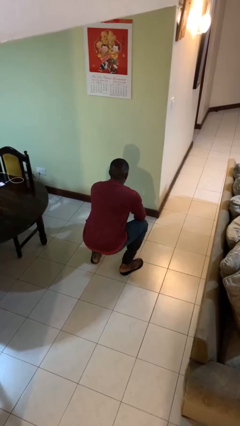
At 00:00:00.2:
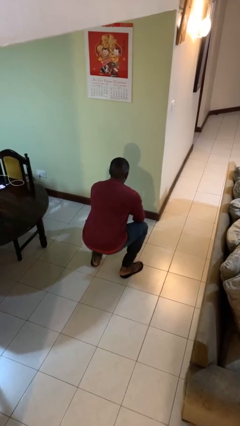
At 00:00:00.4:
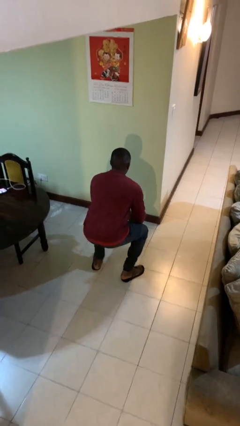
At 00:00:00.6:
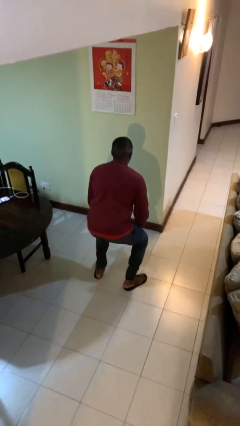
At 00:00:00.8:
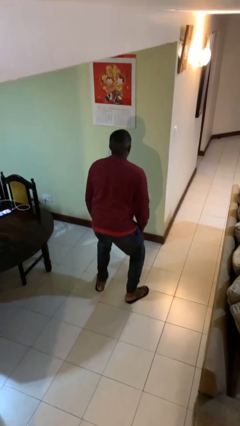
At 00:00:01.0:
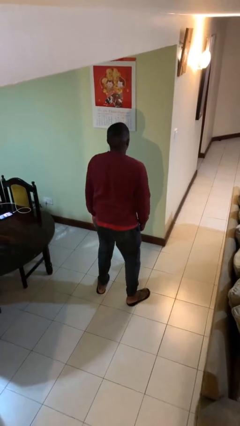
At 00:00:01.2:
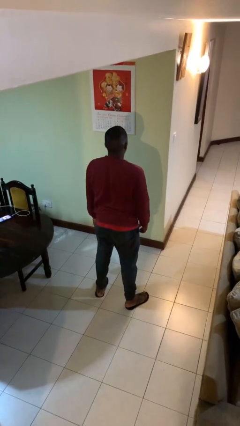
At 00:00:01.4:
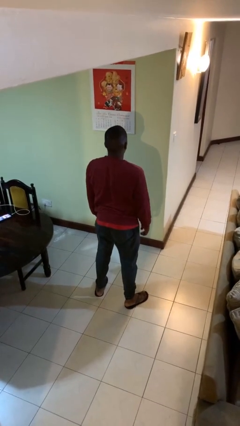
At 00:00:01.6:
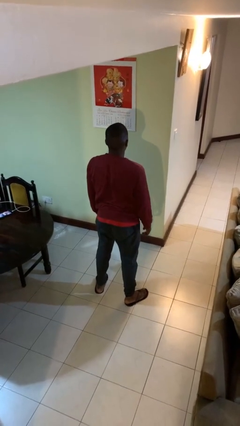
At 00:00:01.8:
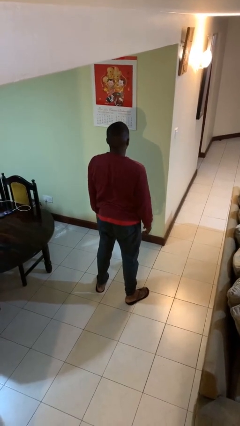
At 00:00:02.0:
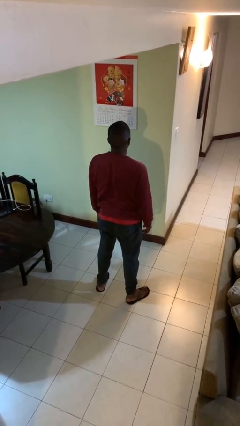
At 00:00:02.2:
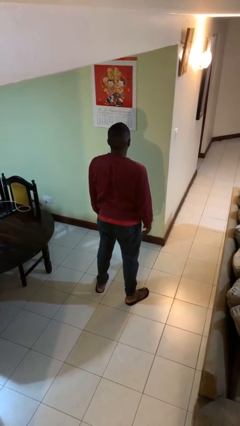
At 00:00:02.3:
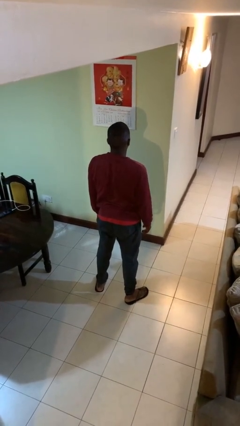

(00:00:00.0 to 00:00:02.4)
person stands up

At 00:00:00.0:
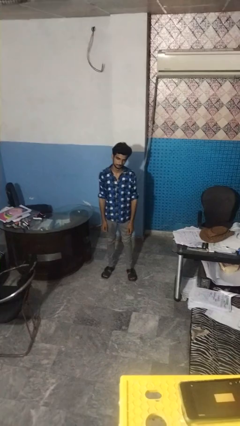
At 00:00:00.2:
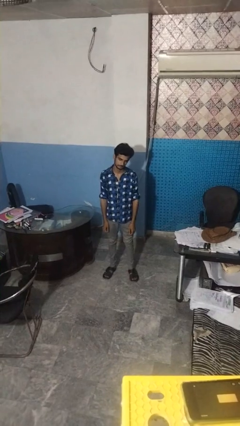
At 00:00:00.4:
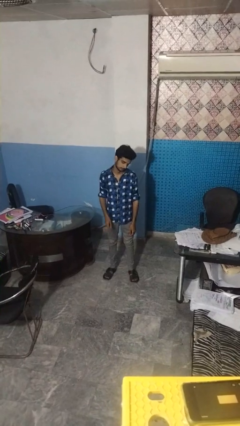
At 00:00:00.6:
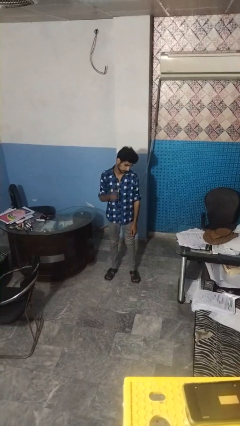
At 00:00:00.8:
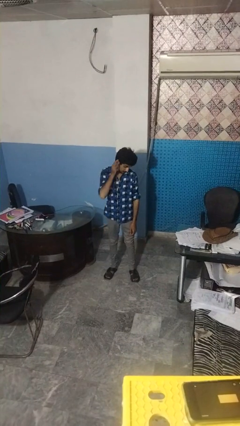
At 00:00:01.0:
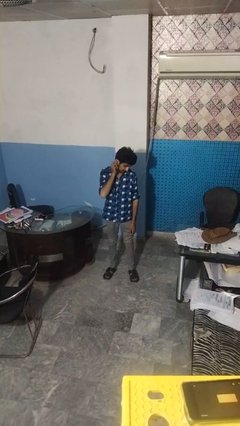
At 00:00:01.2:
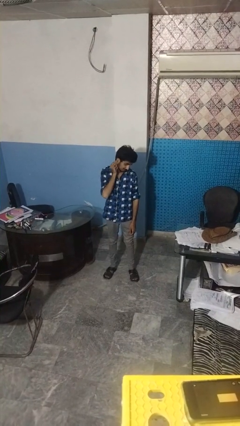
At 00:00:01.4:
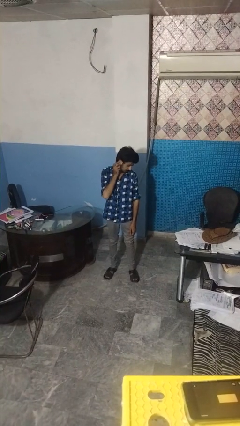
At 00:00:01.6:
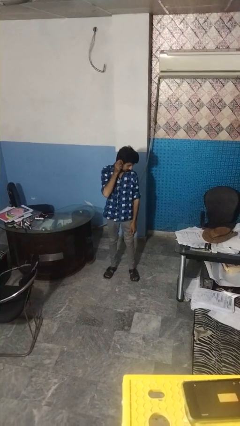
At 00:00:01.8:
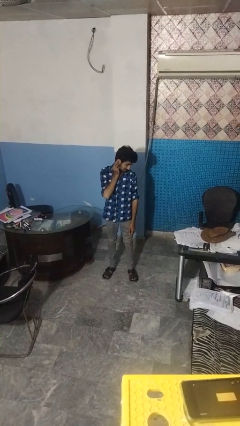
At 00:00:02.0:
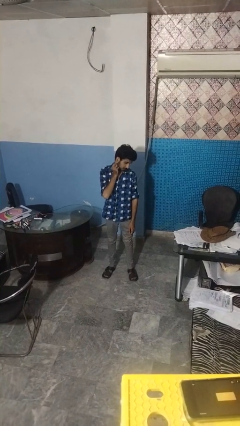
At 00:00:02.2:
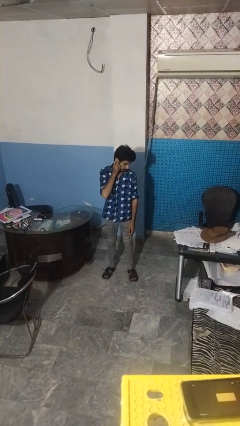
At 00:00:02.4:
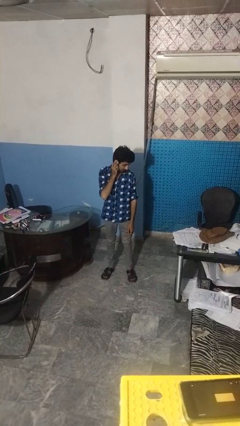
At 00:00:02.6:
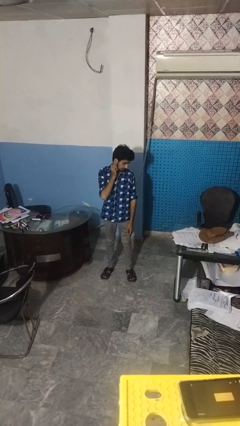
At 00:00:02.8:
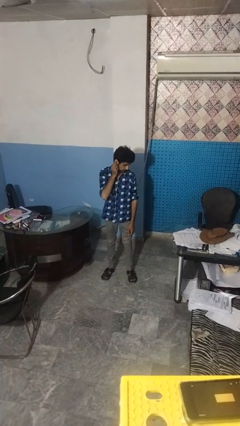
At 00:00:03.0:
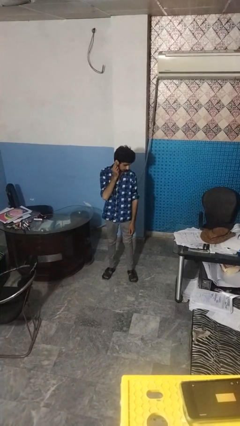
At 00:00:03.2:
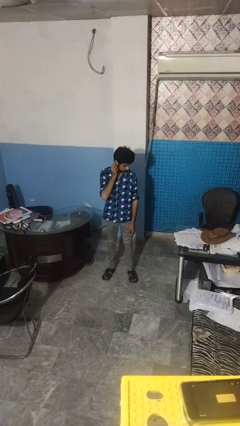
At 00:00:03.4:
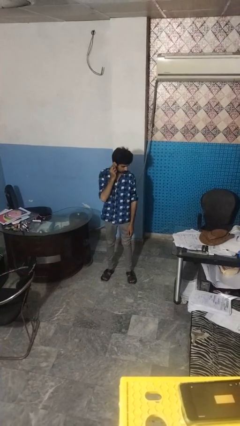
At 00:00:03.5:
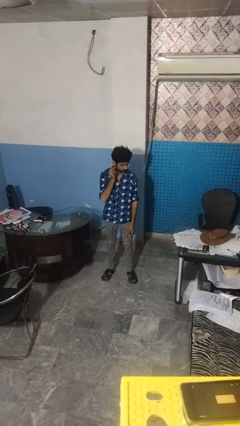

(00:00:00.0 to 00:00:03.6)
person touches earlobe

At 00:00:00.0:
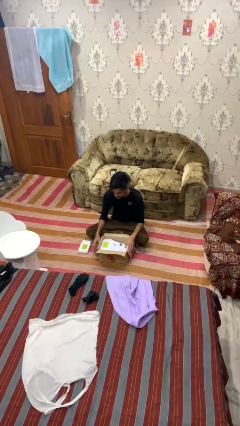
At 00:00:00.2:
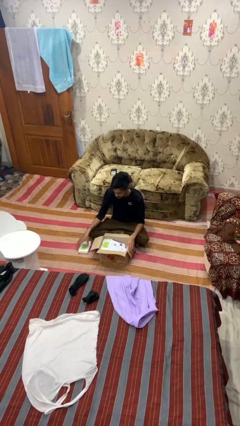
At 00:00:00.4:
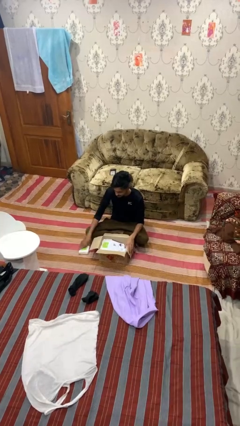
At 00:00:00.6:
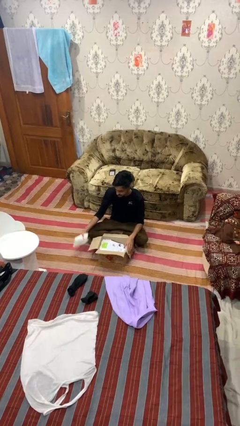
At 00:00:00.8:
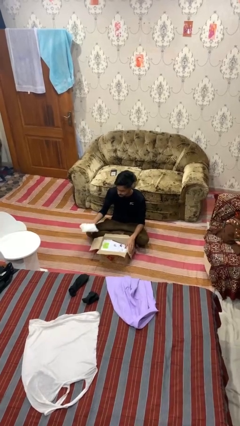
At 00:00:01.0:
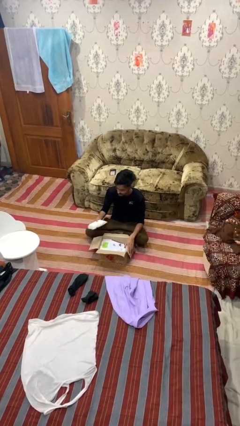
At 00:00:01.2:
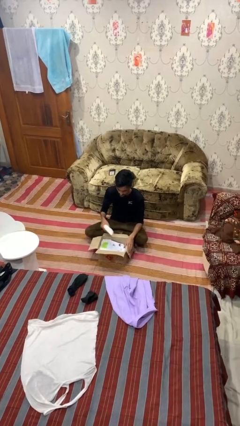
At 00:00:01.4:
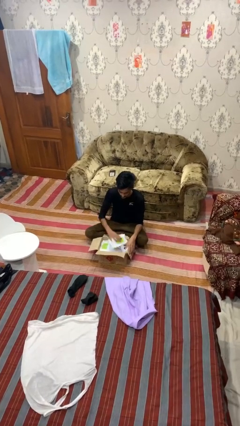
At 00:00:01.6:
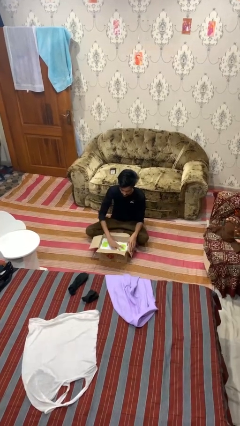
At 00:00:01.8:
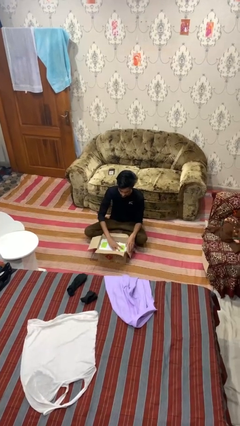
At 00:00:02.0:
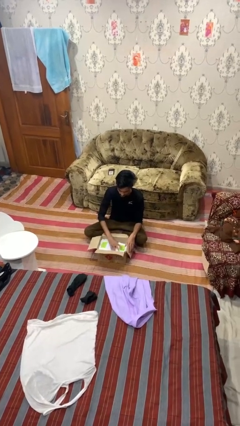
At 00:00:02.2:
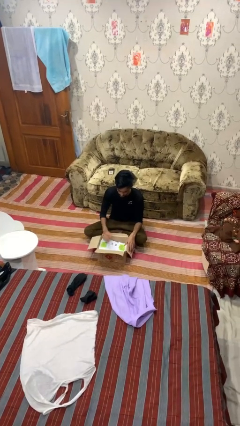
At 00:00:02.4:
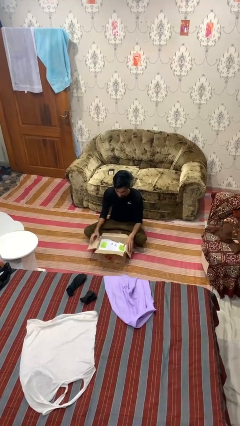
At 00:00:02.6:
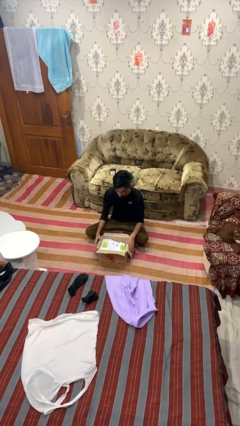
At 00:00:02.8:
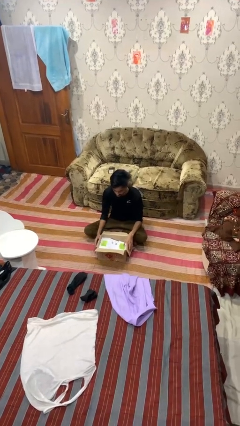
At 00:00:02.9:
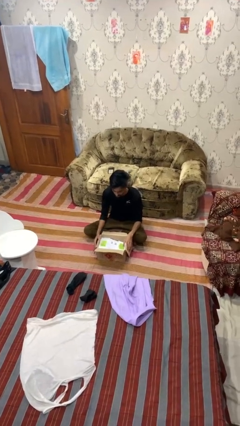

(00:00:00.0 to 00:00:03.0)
person puts object into box

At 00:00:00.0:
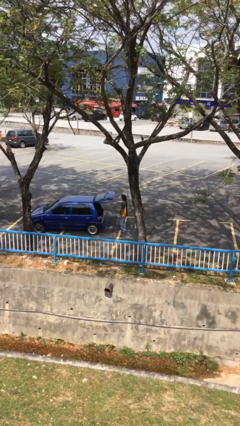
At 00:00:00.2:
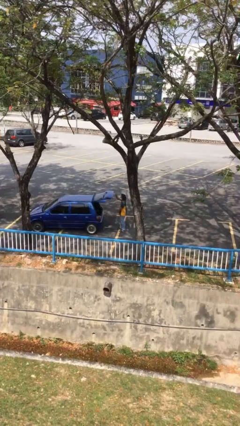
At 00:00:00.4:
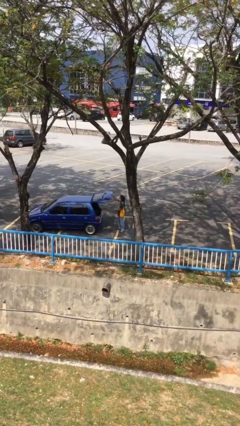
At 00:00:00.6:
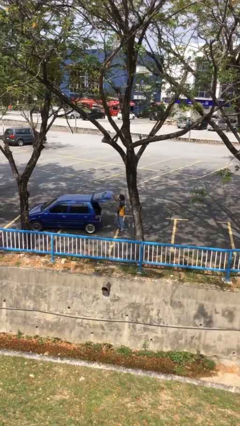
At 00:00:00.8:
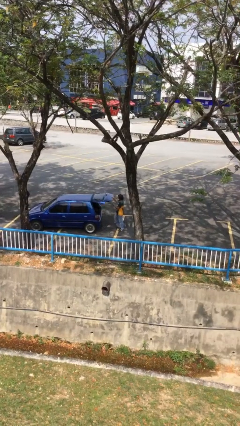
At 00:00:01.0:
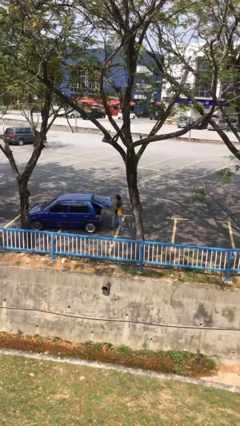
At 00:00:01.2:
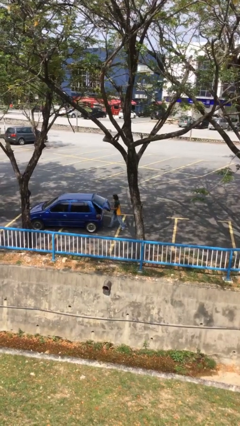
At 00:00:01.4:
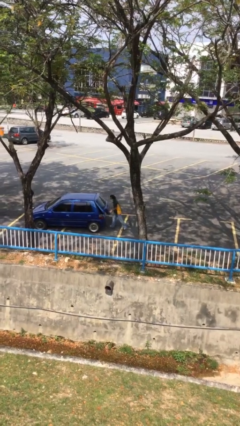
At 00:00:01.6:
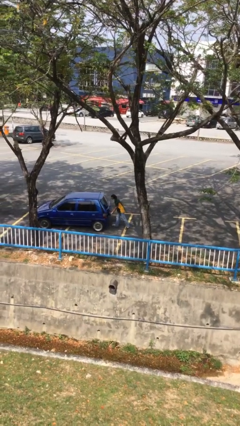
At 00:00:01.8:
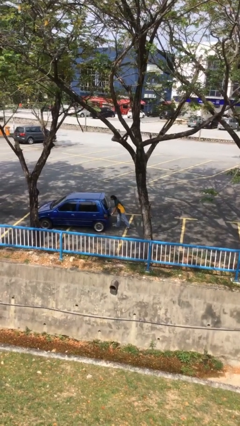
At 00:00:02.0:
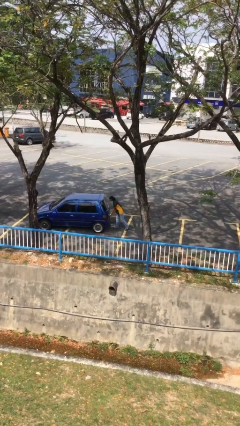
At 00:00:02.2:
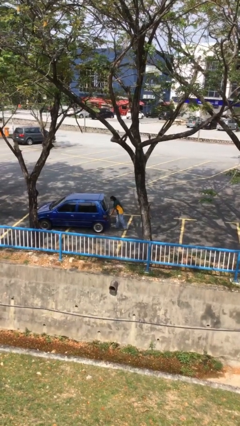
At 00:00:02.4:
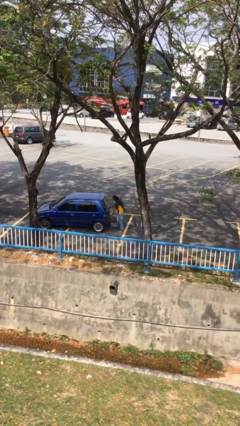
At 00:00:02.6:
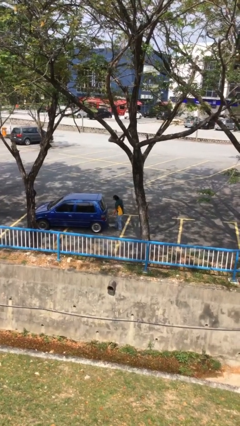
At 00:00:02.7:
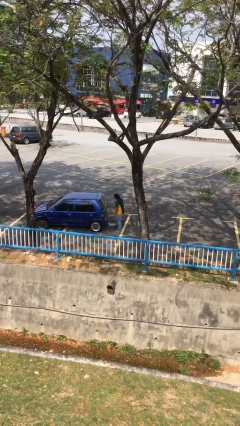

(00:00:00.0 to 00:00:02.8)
person closes car trunk

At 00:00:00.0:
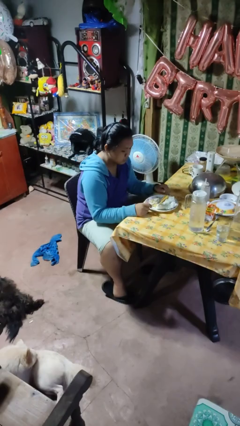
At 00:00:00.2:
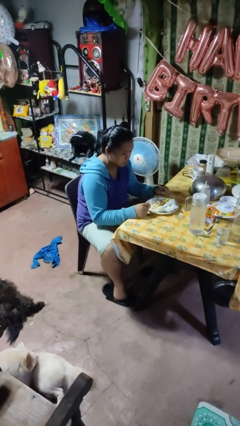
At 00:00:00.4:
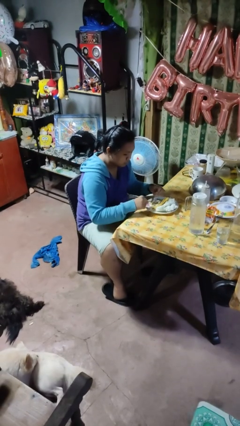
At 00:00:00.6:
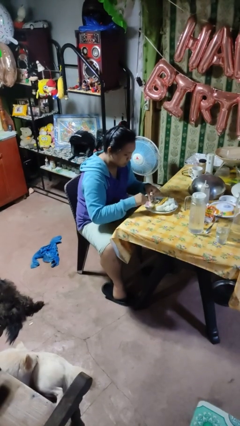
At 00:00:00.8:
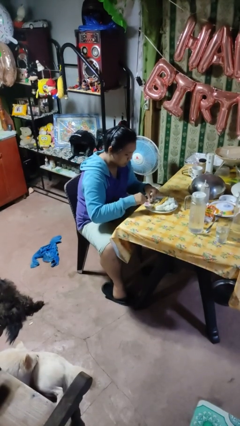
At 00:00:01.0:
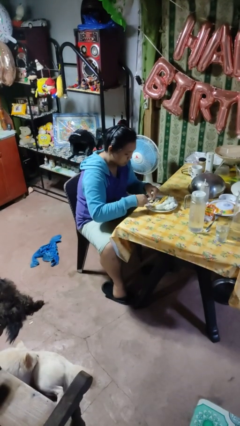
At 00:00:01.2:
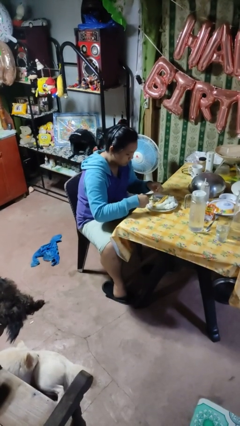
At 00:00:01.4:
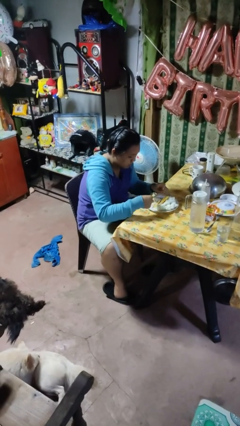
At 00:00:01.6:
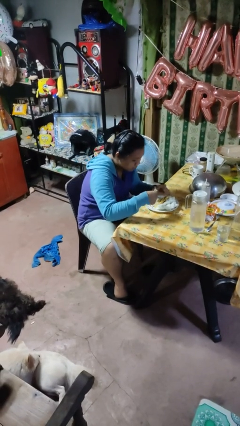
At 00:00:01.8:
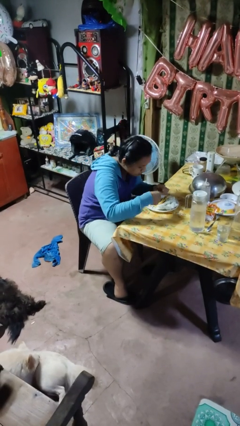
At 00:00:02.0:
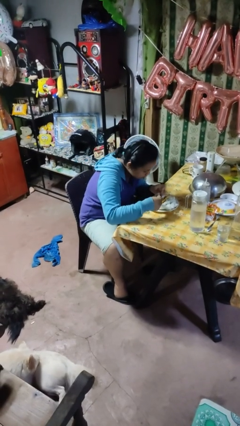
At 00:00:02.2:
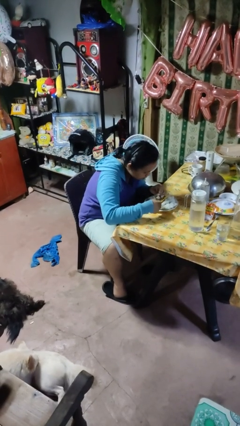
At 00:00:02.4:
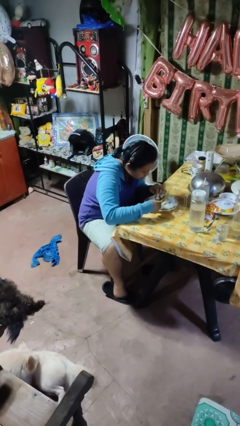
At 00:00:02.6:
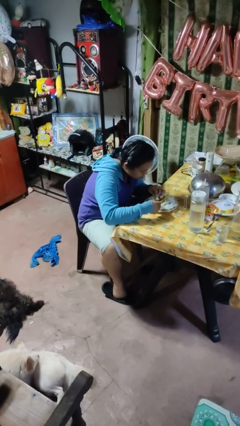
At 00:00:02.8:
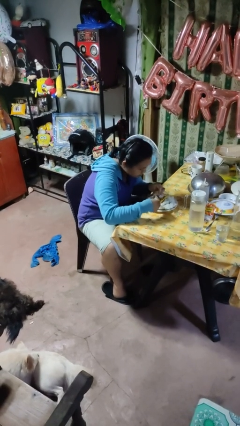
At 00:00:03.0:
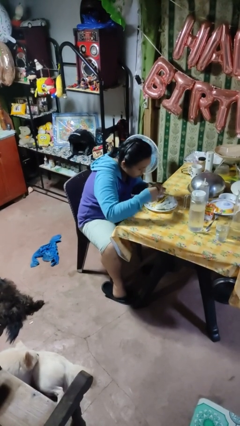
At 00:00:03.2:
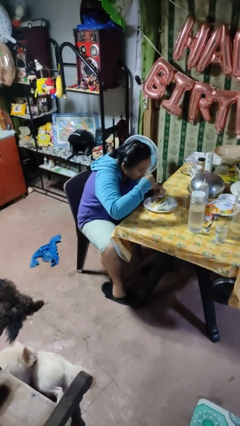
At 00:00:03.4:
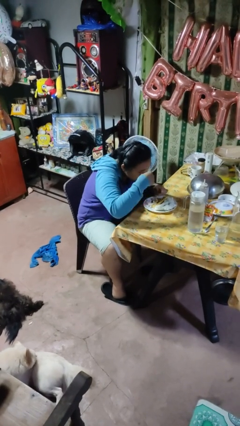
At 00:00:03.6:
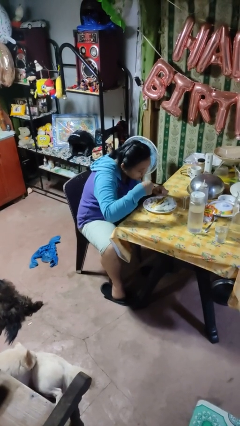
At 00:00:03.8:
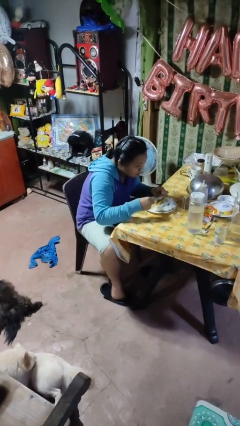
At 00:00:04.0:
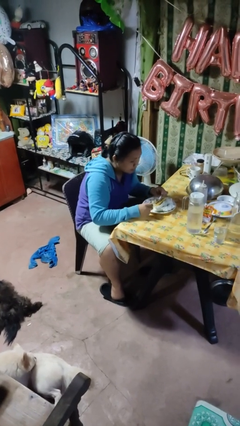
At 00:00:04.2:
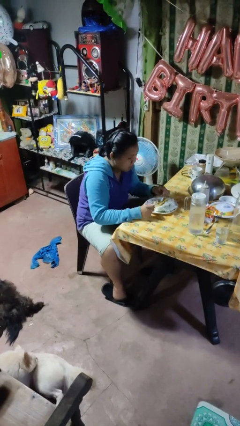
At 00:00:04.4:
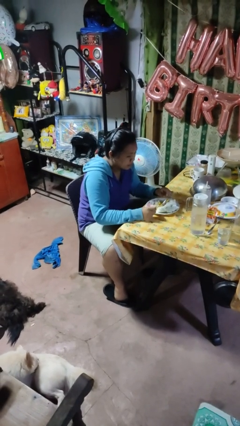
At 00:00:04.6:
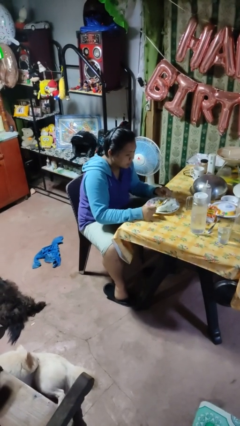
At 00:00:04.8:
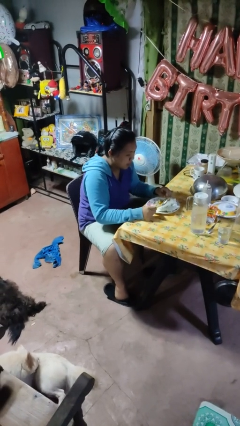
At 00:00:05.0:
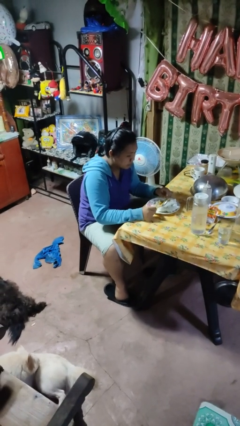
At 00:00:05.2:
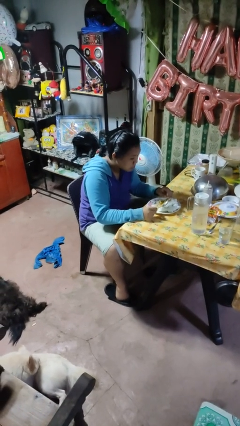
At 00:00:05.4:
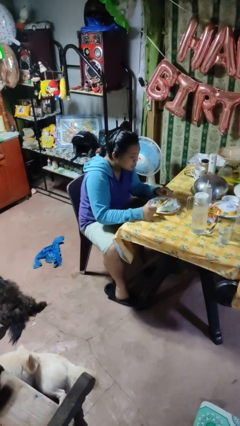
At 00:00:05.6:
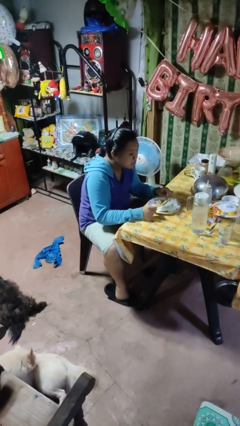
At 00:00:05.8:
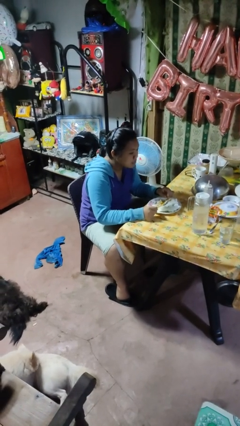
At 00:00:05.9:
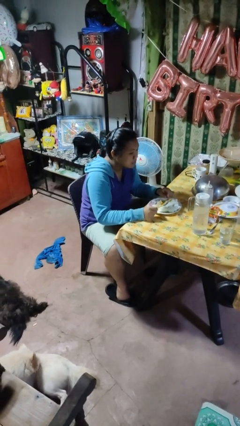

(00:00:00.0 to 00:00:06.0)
person eats with utensil
